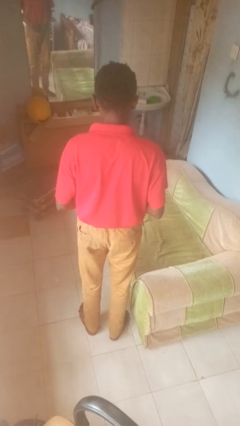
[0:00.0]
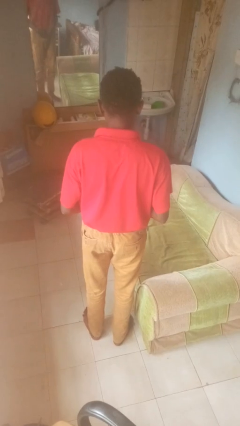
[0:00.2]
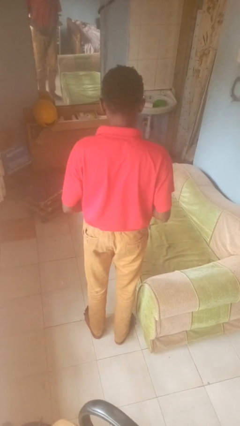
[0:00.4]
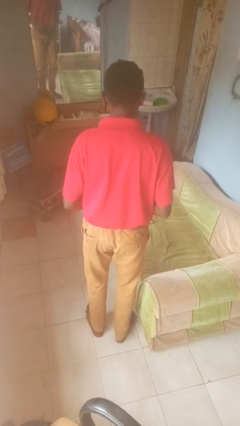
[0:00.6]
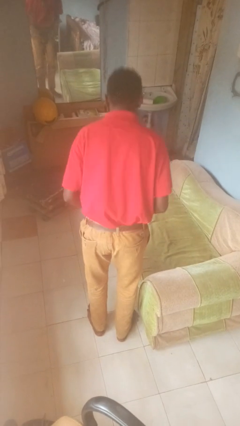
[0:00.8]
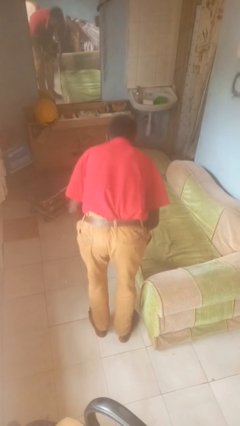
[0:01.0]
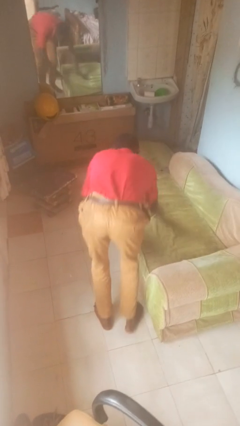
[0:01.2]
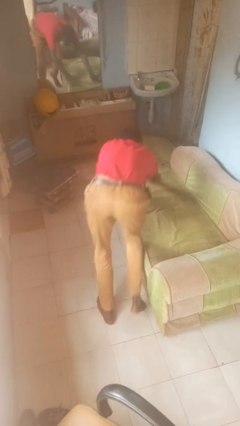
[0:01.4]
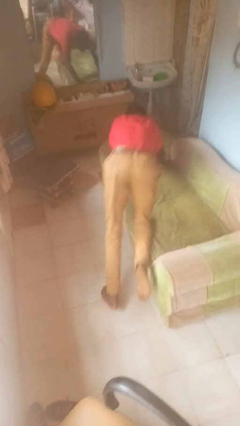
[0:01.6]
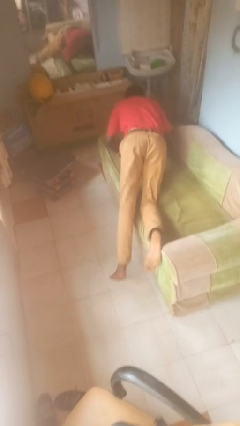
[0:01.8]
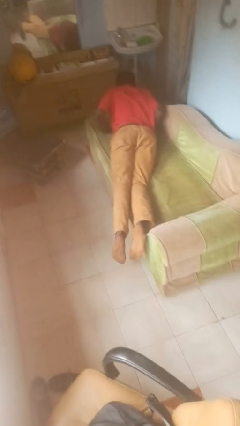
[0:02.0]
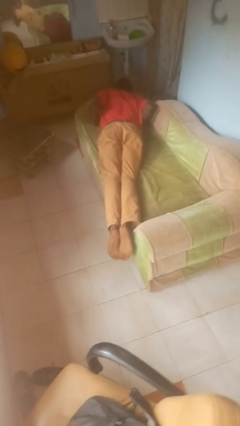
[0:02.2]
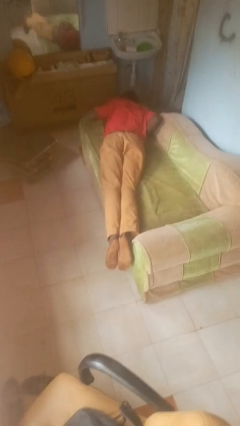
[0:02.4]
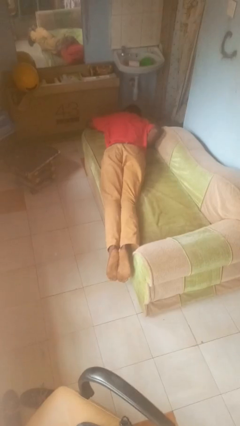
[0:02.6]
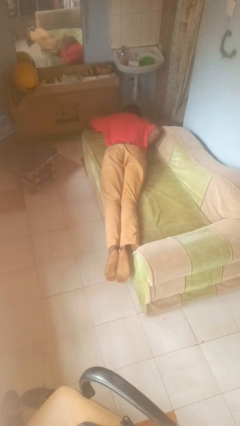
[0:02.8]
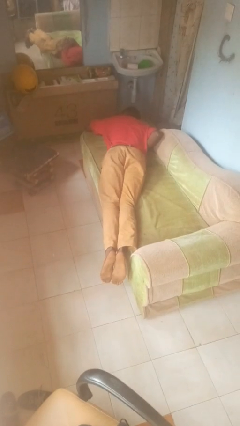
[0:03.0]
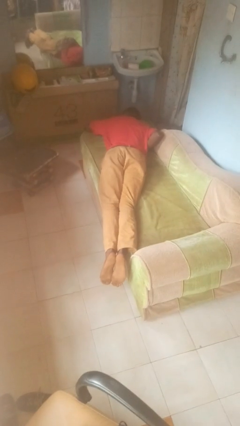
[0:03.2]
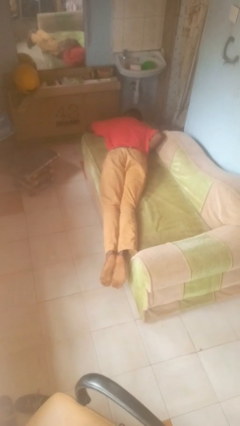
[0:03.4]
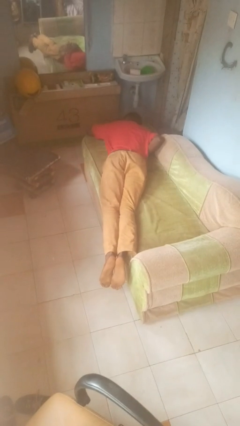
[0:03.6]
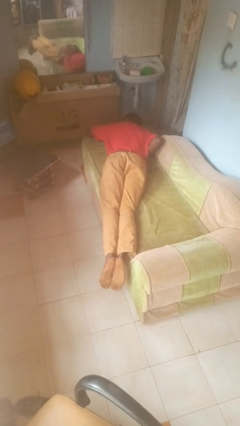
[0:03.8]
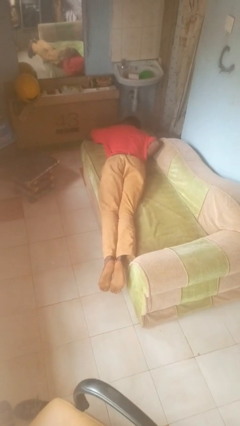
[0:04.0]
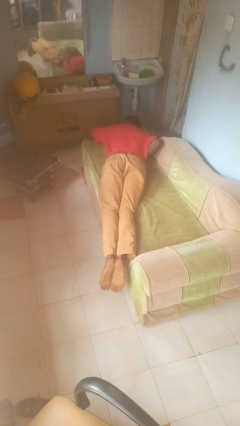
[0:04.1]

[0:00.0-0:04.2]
person lies down on couch

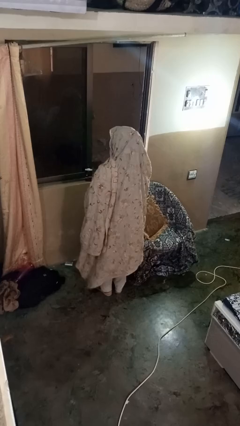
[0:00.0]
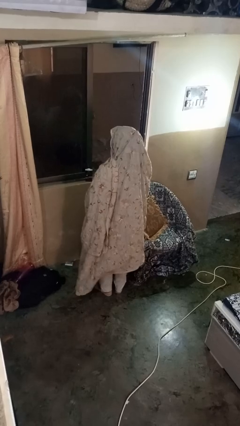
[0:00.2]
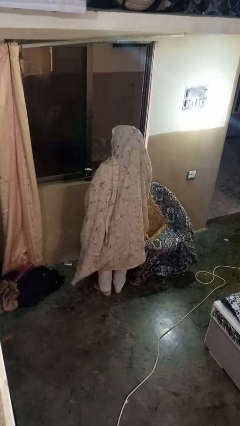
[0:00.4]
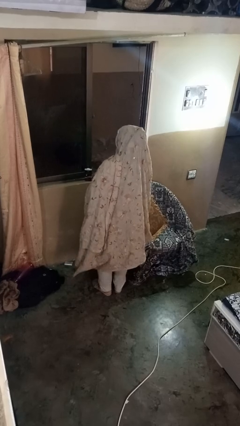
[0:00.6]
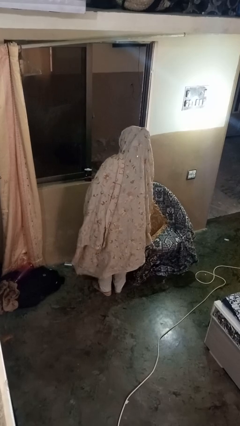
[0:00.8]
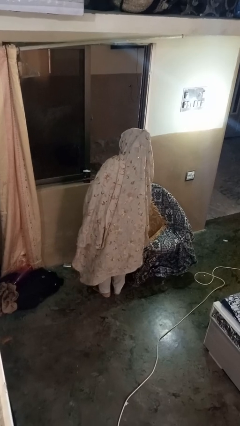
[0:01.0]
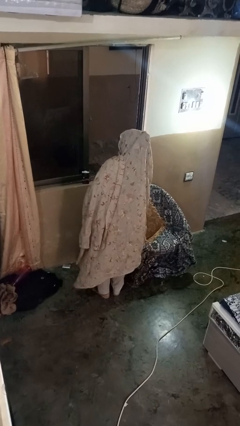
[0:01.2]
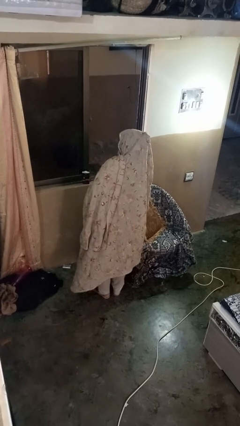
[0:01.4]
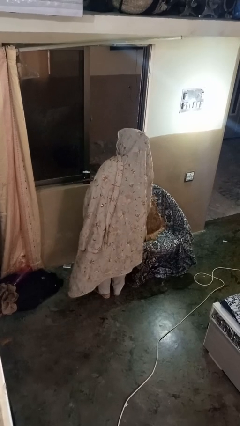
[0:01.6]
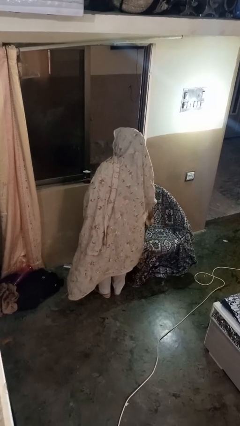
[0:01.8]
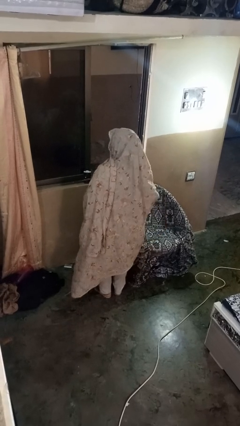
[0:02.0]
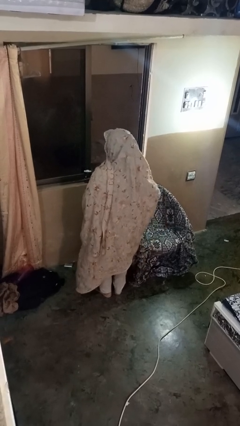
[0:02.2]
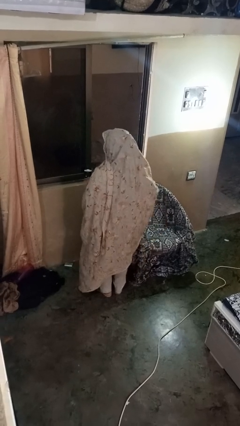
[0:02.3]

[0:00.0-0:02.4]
person picks up object from couch

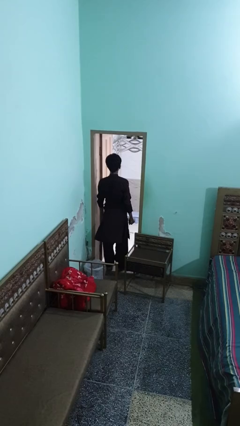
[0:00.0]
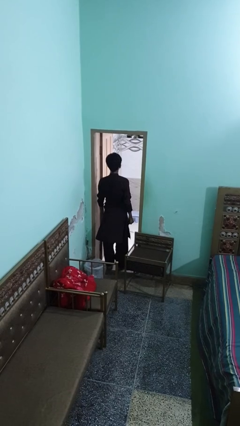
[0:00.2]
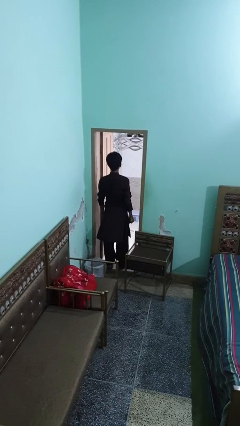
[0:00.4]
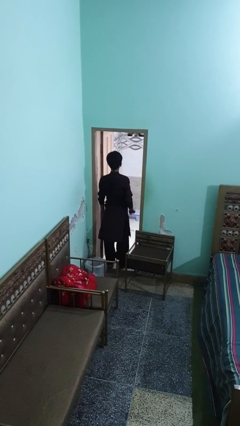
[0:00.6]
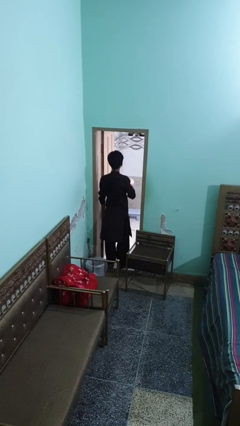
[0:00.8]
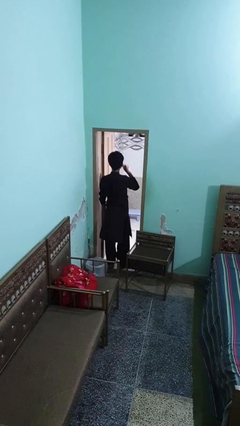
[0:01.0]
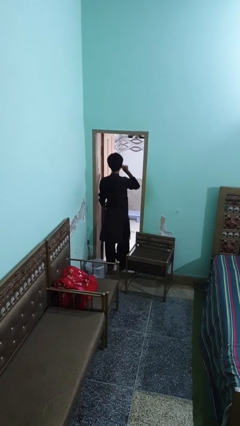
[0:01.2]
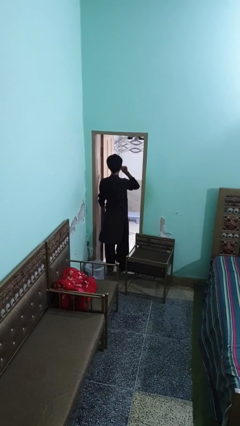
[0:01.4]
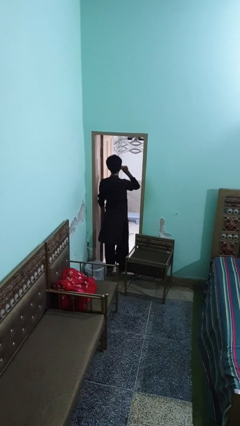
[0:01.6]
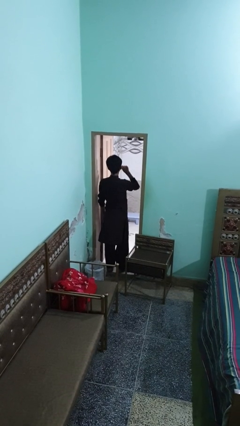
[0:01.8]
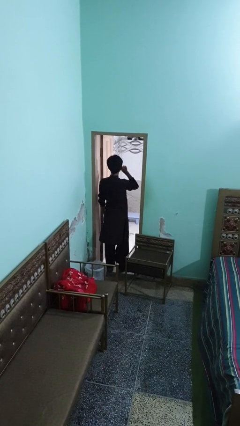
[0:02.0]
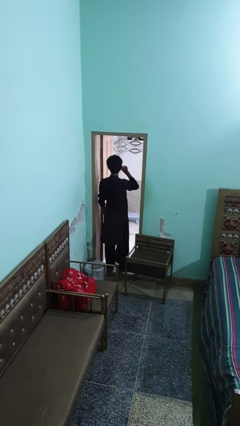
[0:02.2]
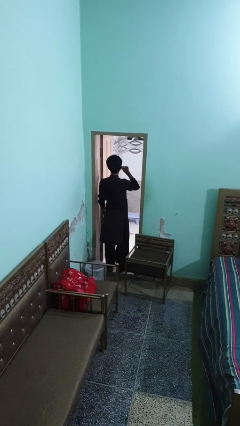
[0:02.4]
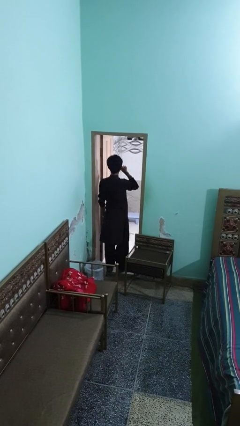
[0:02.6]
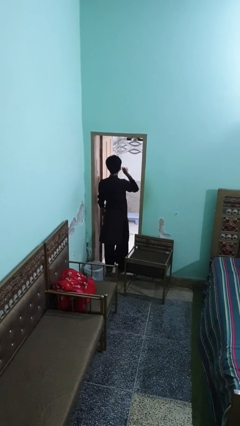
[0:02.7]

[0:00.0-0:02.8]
person brushes teeth

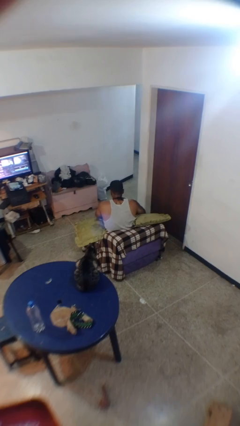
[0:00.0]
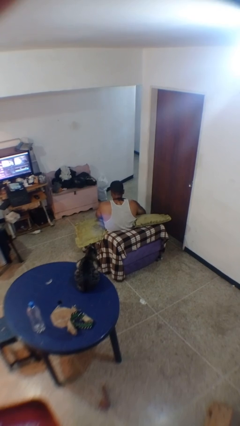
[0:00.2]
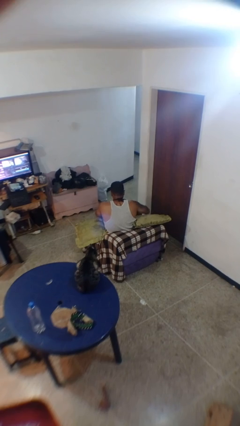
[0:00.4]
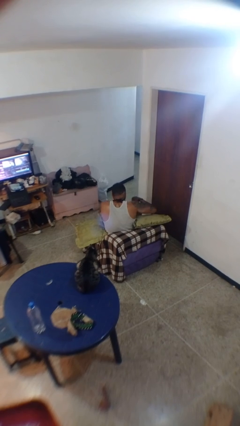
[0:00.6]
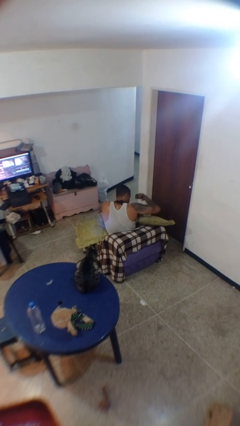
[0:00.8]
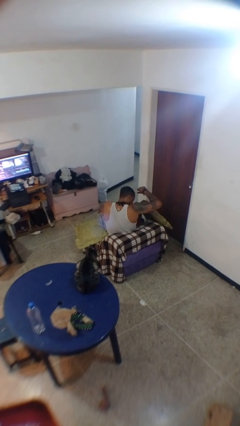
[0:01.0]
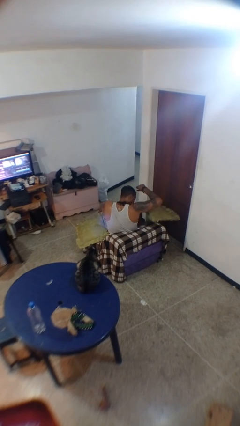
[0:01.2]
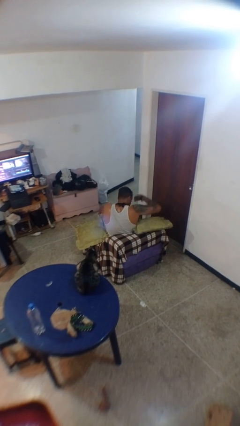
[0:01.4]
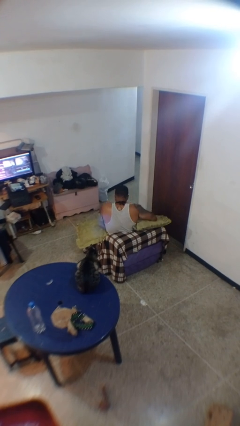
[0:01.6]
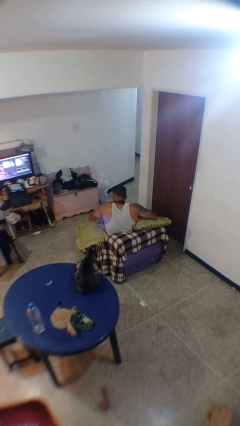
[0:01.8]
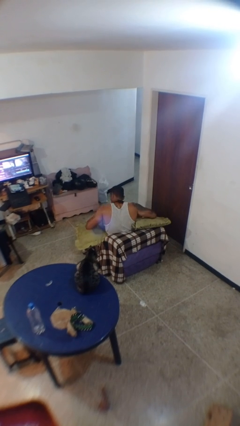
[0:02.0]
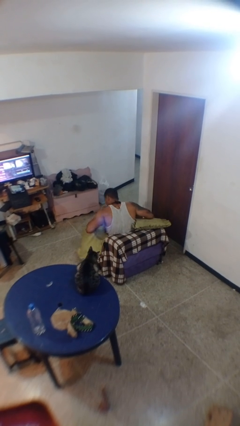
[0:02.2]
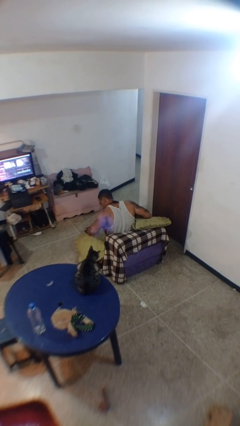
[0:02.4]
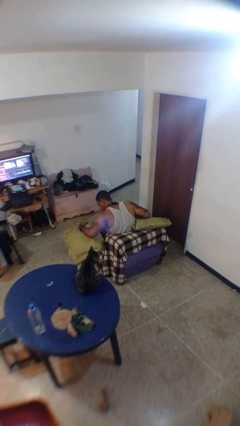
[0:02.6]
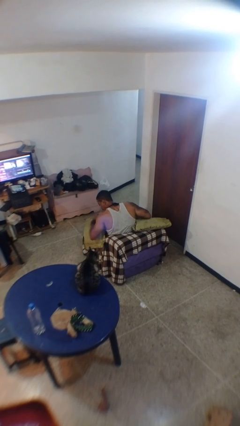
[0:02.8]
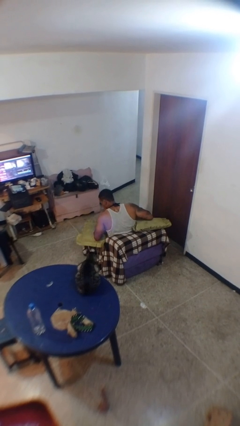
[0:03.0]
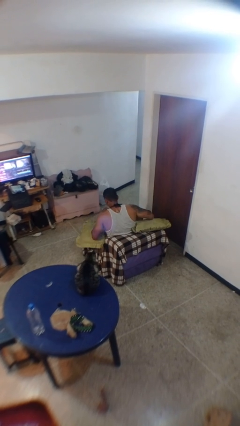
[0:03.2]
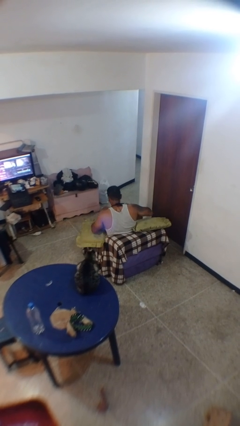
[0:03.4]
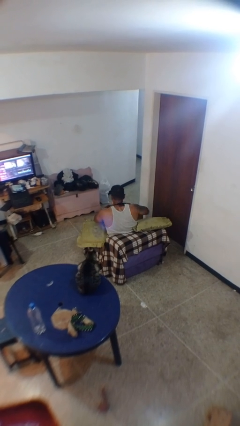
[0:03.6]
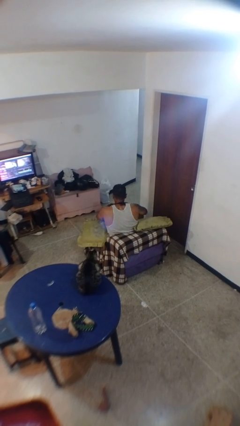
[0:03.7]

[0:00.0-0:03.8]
person searches in couch

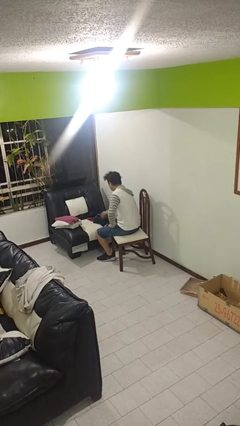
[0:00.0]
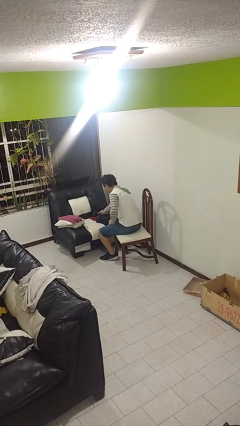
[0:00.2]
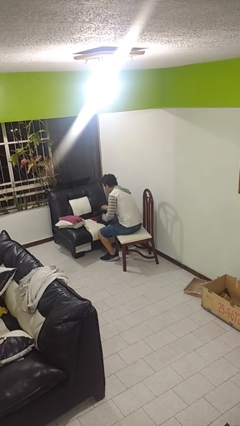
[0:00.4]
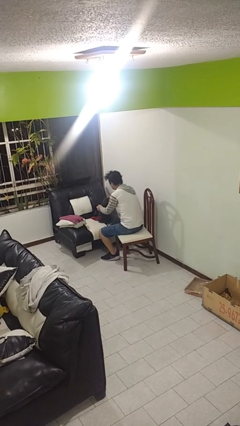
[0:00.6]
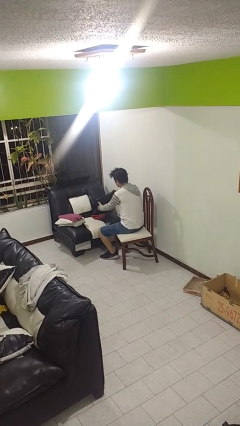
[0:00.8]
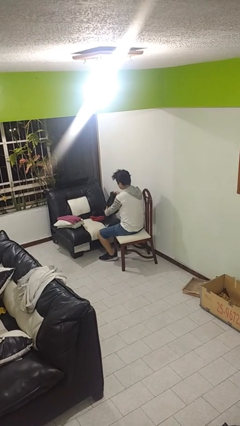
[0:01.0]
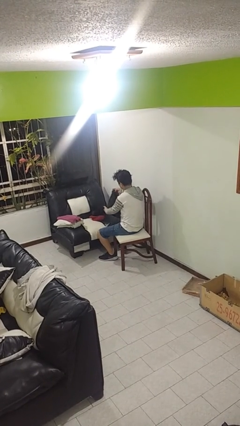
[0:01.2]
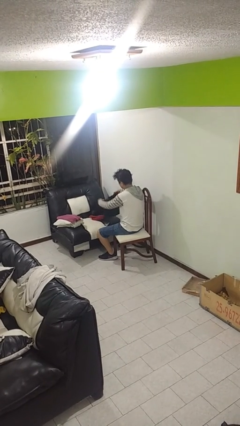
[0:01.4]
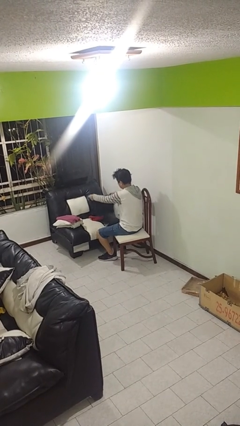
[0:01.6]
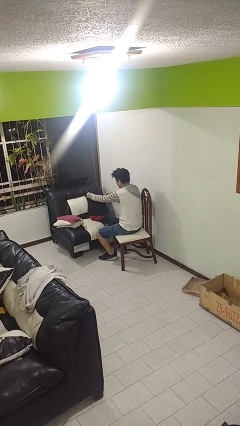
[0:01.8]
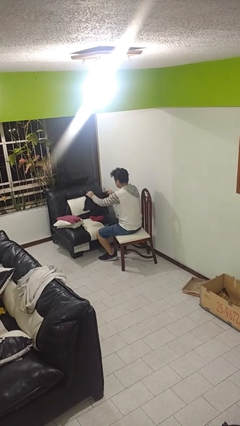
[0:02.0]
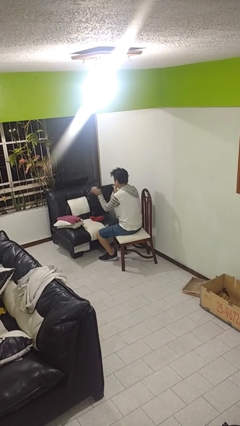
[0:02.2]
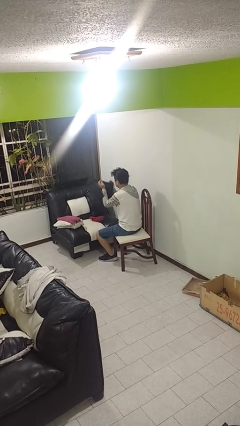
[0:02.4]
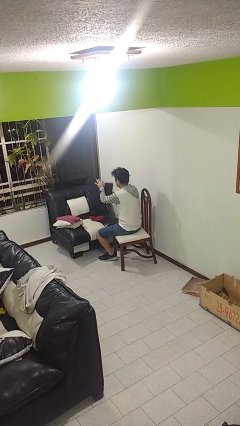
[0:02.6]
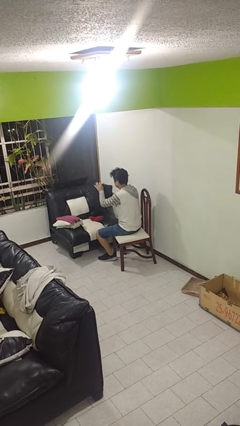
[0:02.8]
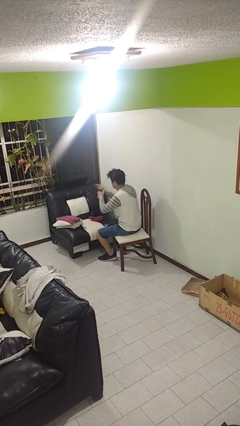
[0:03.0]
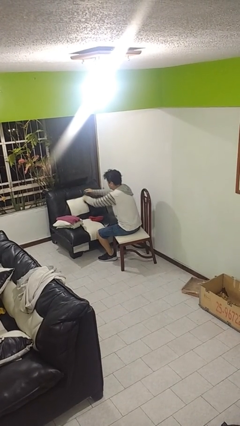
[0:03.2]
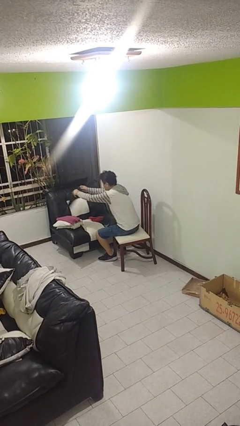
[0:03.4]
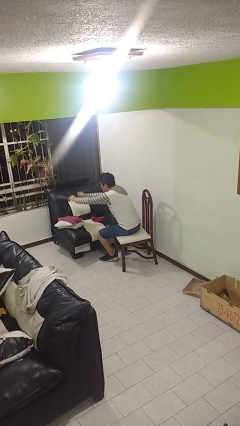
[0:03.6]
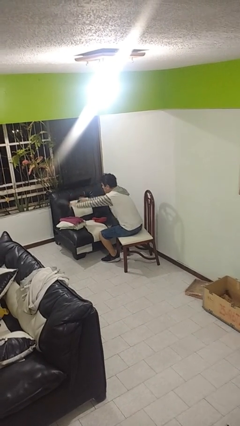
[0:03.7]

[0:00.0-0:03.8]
person folds towel

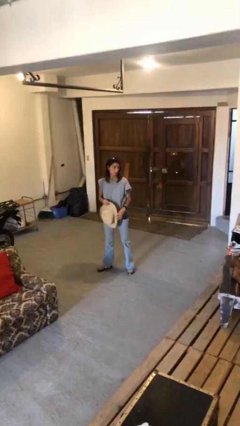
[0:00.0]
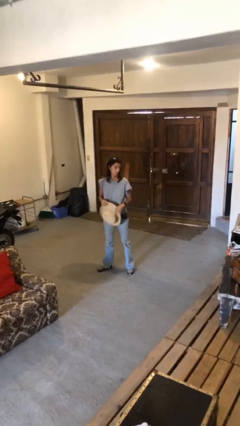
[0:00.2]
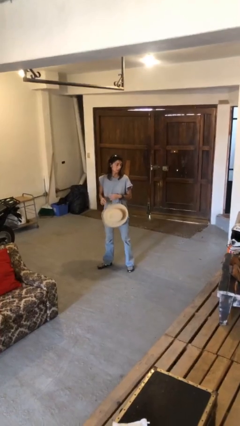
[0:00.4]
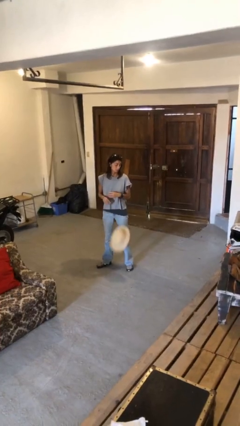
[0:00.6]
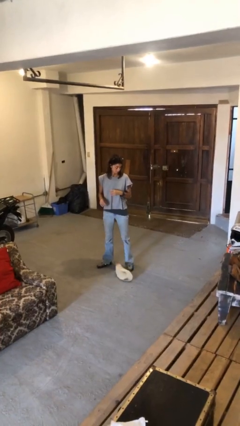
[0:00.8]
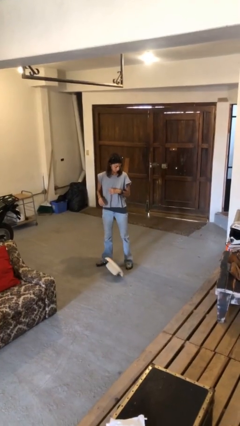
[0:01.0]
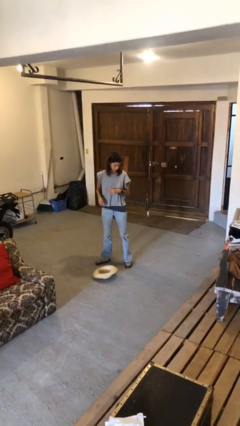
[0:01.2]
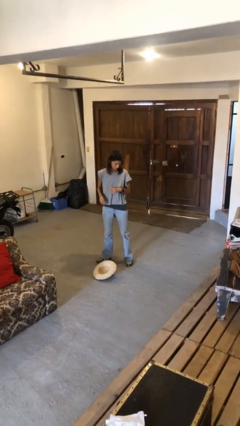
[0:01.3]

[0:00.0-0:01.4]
person drops object
